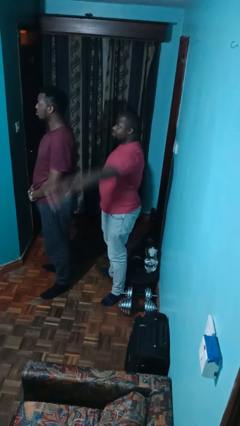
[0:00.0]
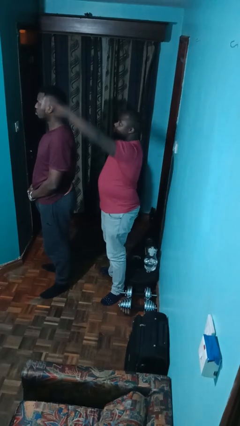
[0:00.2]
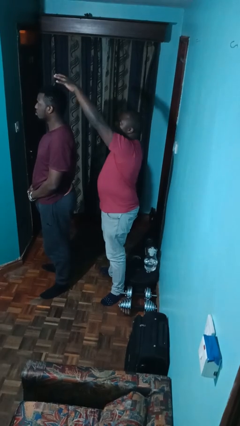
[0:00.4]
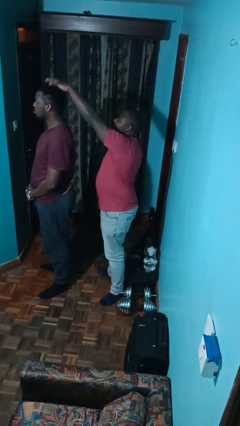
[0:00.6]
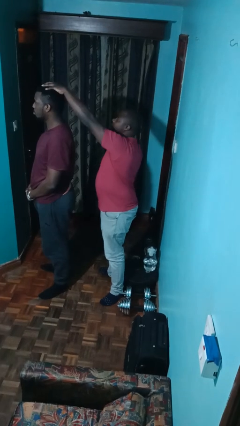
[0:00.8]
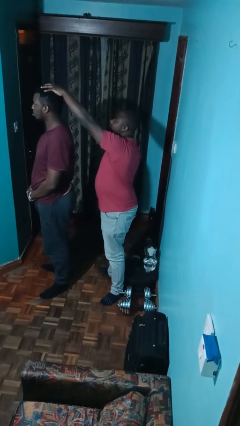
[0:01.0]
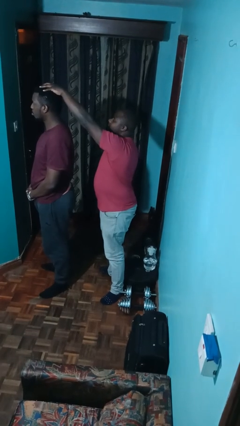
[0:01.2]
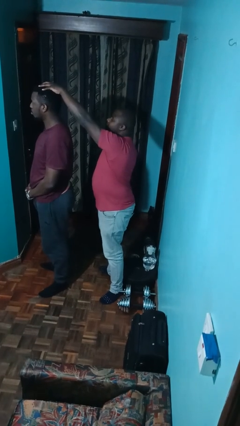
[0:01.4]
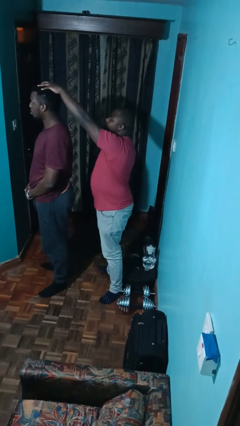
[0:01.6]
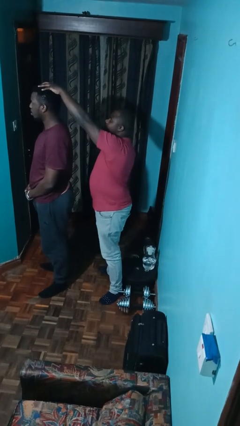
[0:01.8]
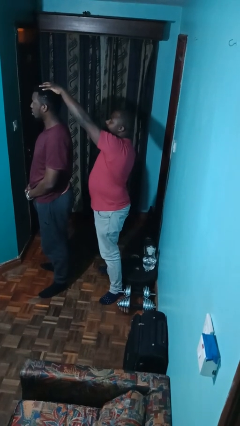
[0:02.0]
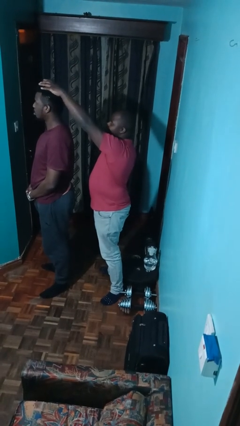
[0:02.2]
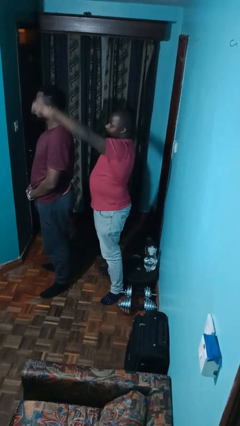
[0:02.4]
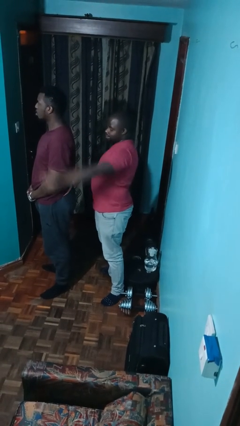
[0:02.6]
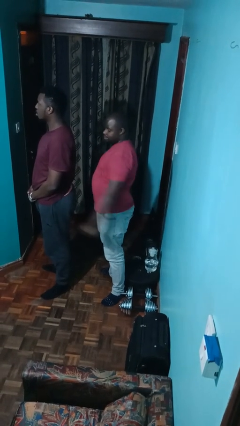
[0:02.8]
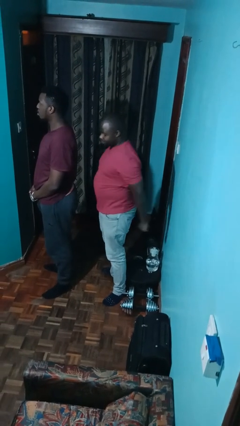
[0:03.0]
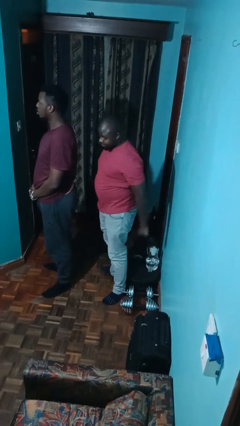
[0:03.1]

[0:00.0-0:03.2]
person grabs person by hair

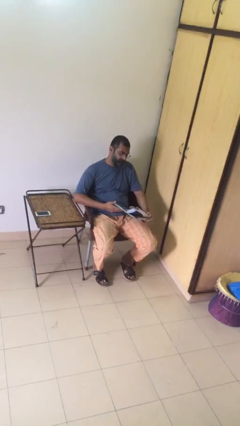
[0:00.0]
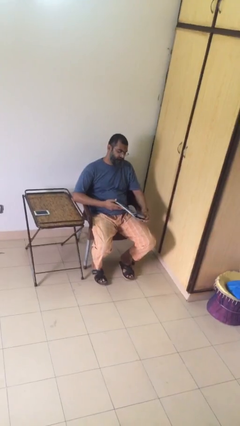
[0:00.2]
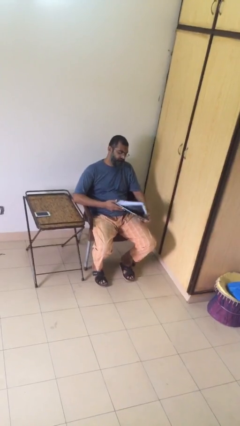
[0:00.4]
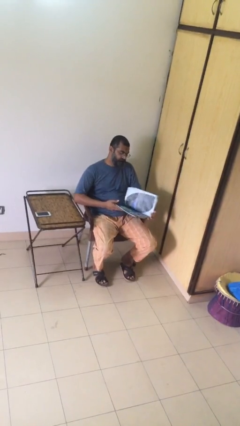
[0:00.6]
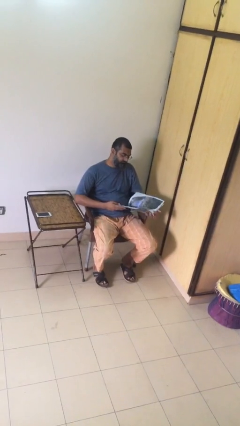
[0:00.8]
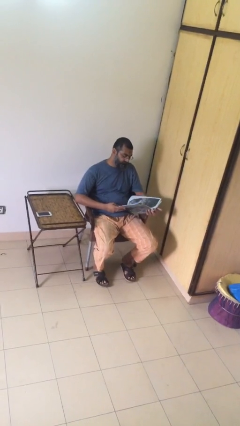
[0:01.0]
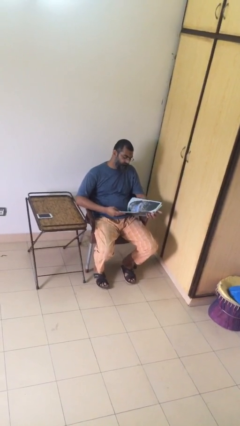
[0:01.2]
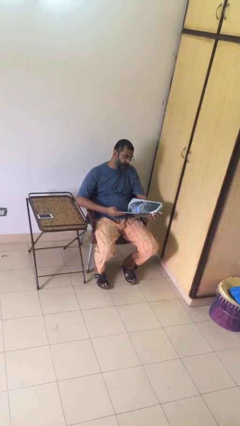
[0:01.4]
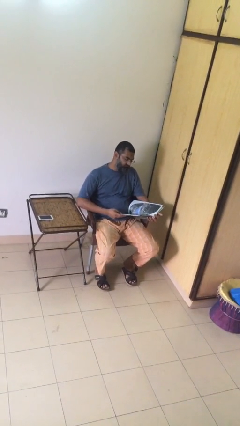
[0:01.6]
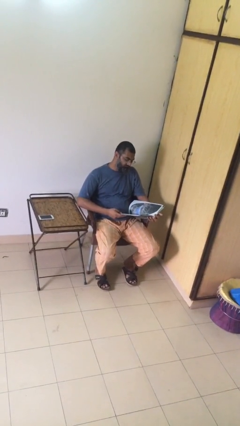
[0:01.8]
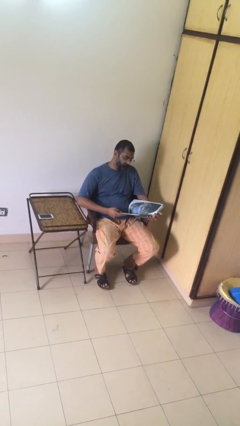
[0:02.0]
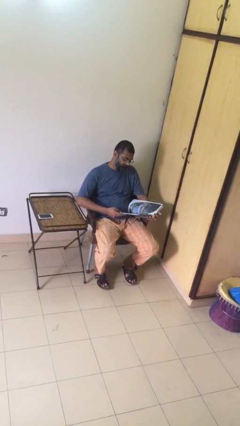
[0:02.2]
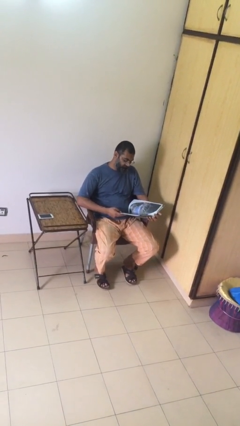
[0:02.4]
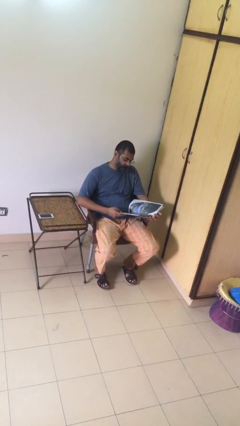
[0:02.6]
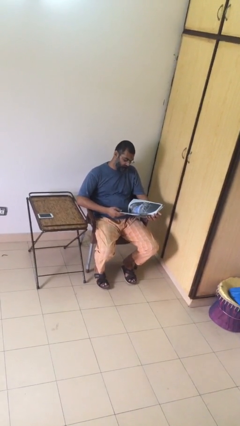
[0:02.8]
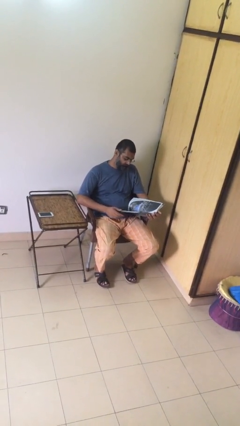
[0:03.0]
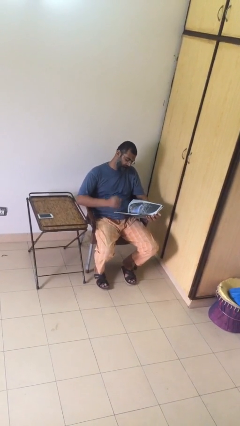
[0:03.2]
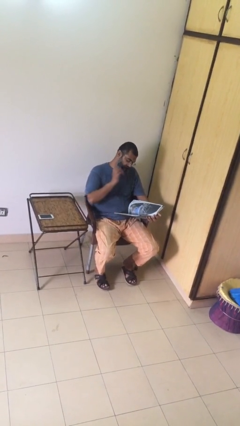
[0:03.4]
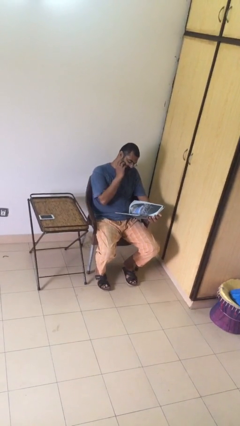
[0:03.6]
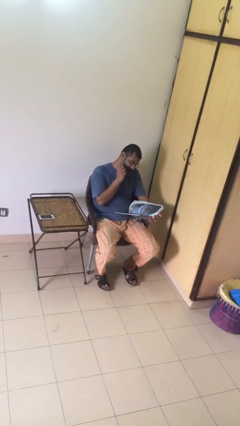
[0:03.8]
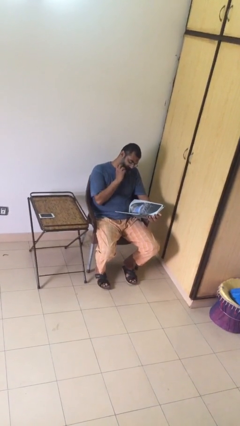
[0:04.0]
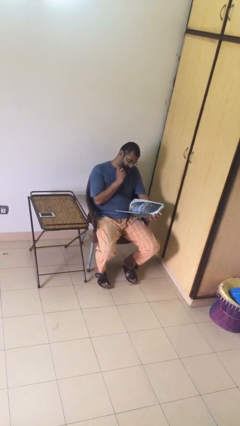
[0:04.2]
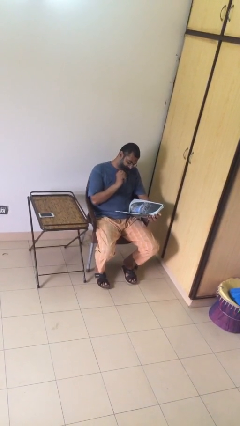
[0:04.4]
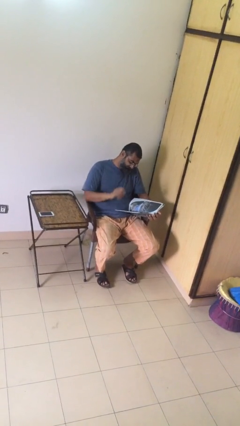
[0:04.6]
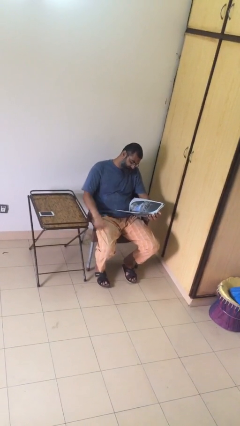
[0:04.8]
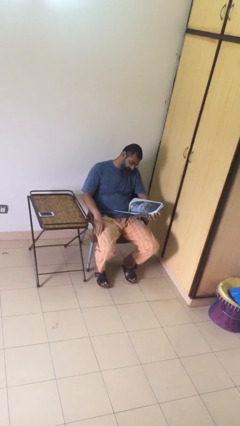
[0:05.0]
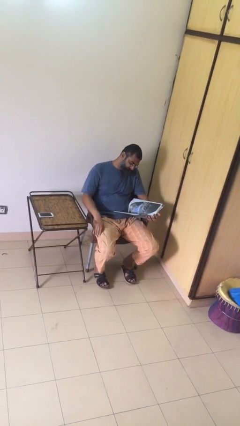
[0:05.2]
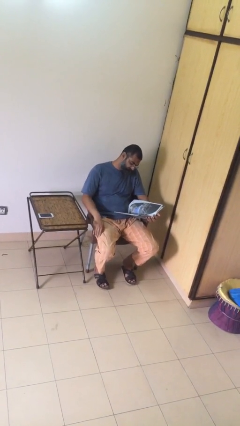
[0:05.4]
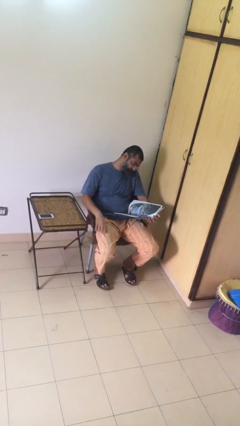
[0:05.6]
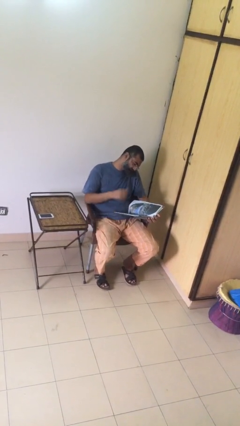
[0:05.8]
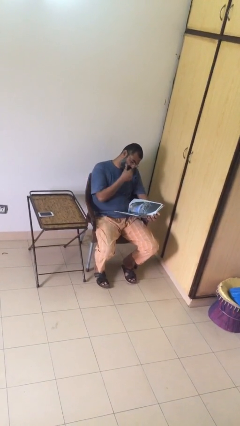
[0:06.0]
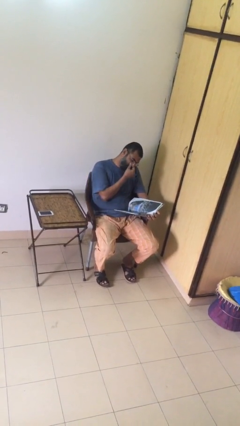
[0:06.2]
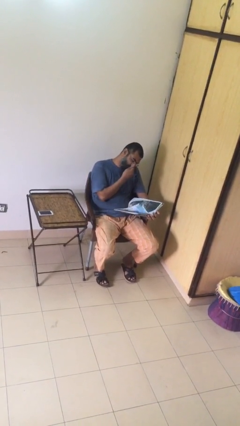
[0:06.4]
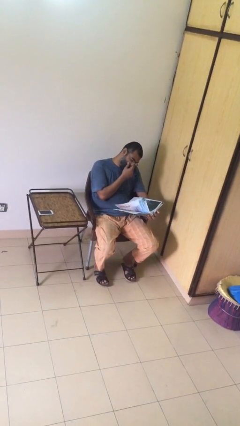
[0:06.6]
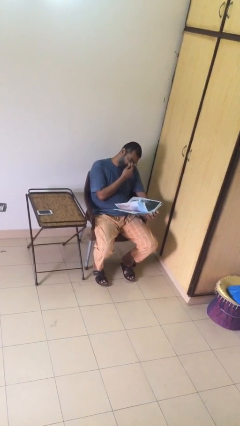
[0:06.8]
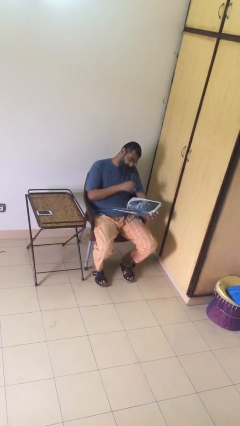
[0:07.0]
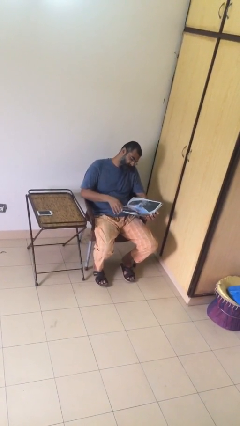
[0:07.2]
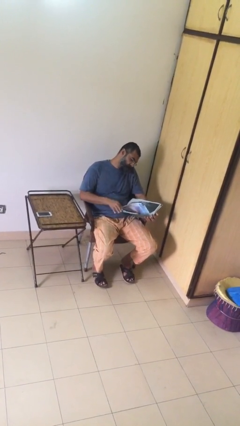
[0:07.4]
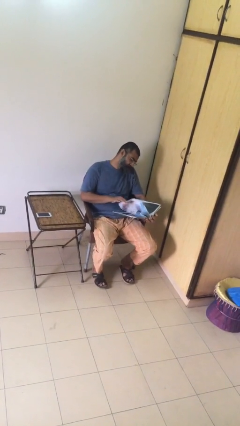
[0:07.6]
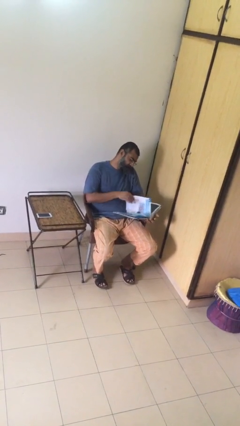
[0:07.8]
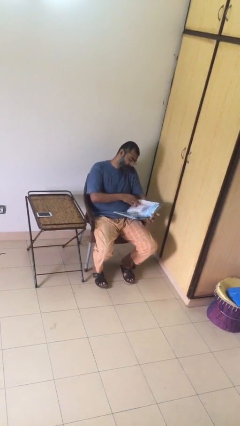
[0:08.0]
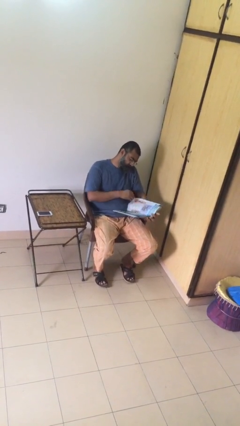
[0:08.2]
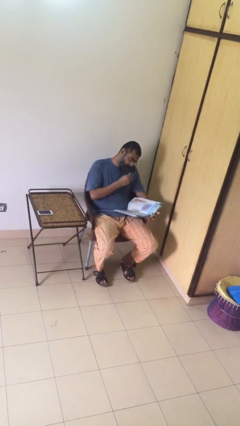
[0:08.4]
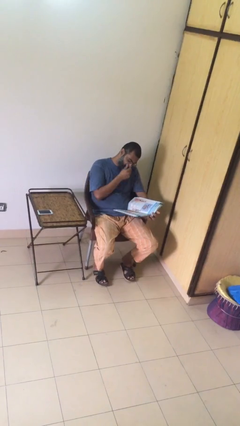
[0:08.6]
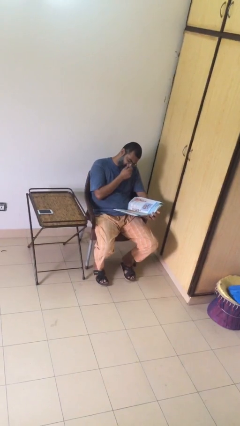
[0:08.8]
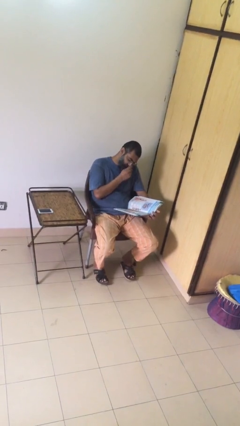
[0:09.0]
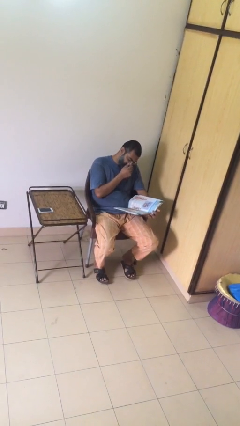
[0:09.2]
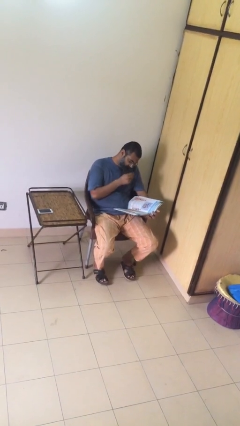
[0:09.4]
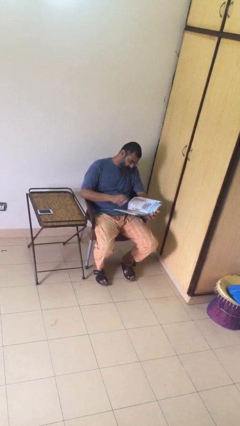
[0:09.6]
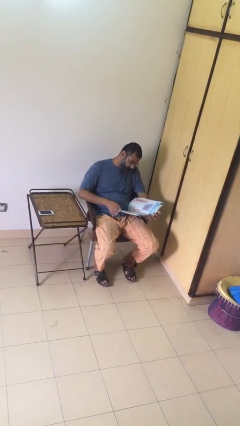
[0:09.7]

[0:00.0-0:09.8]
person reads document

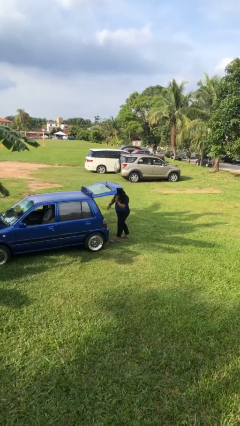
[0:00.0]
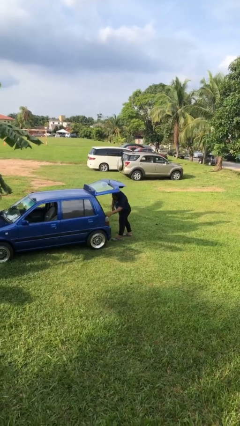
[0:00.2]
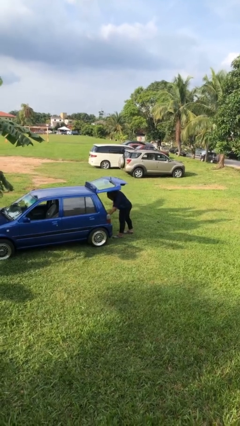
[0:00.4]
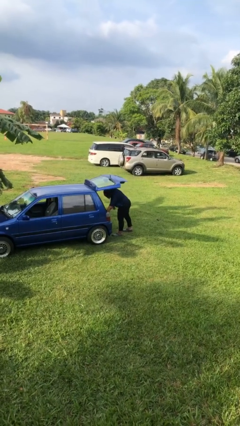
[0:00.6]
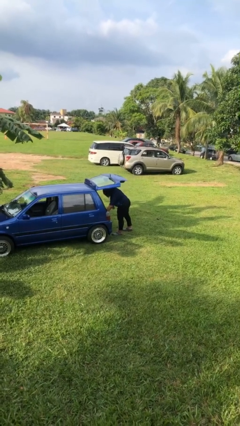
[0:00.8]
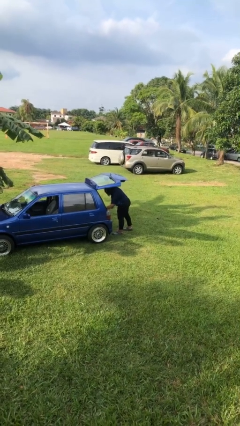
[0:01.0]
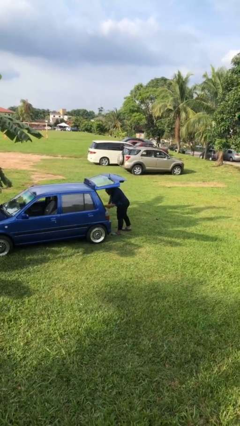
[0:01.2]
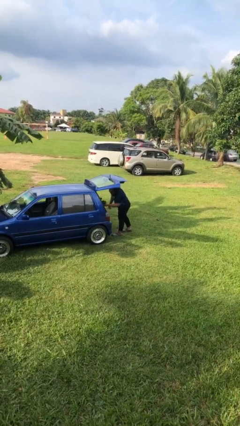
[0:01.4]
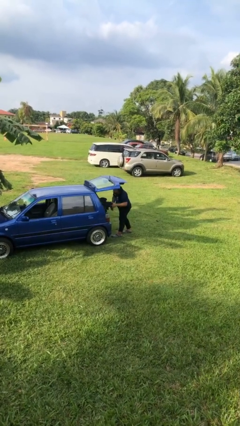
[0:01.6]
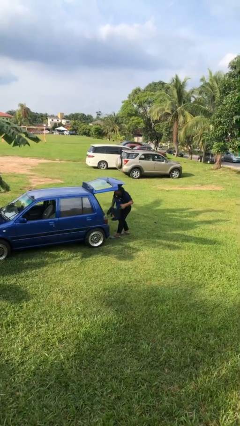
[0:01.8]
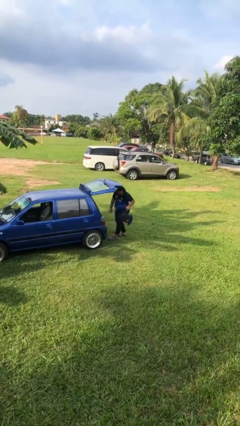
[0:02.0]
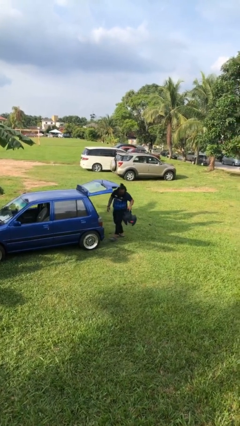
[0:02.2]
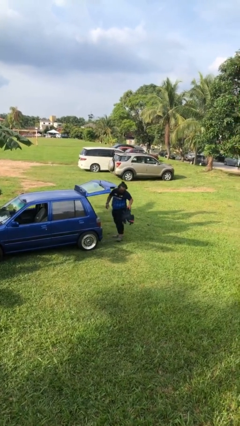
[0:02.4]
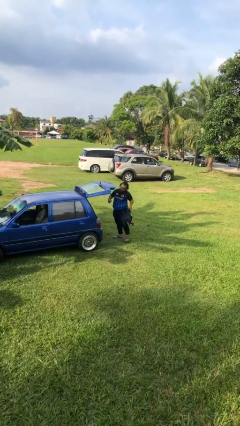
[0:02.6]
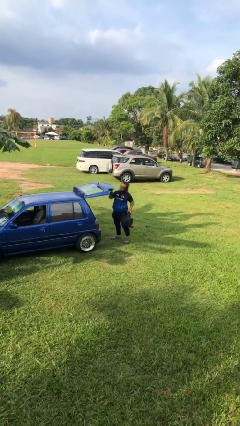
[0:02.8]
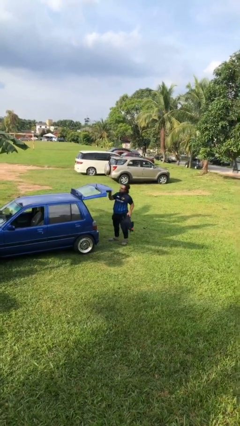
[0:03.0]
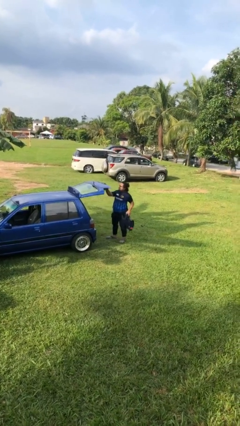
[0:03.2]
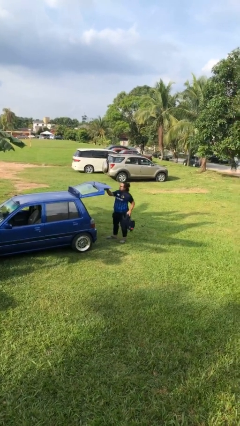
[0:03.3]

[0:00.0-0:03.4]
person unloads car

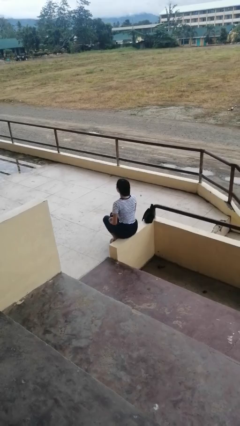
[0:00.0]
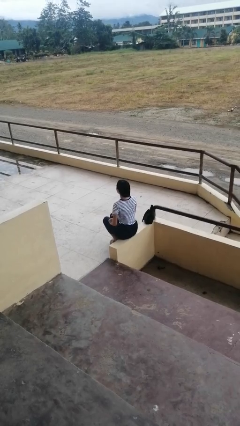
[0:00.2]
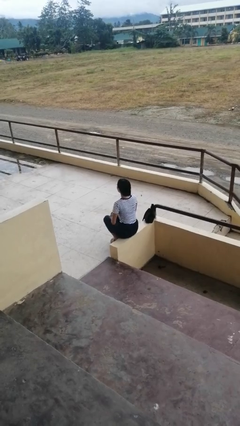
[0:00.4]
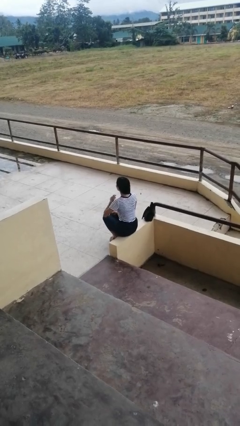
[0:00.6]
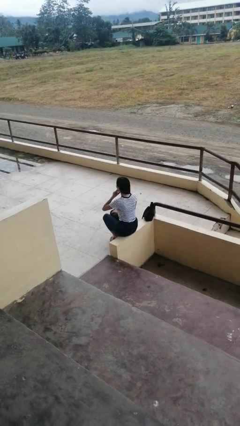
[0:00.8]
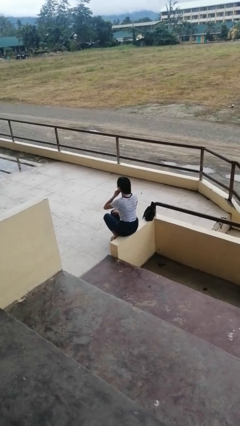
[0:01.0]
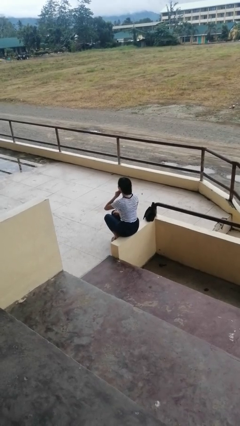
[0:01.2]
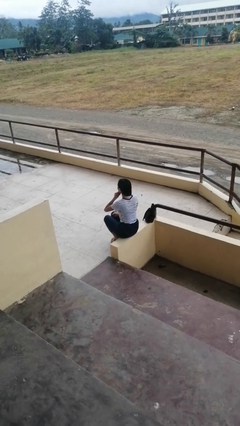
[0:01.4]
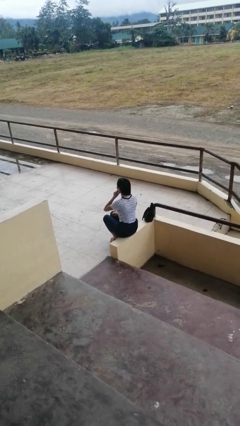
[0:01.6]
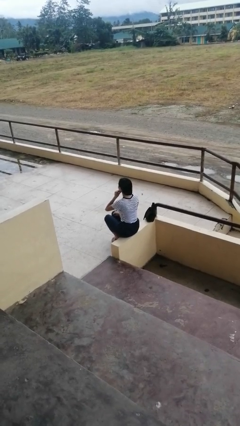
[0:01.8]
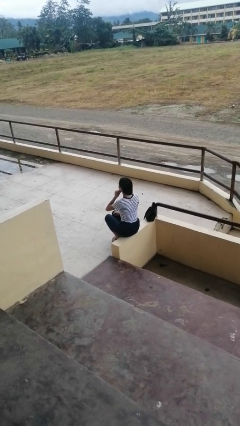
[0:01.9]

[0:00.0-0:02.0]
person strokes chin
